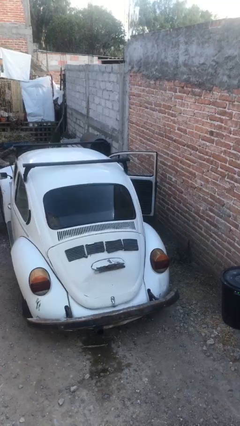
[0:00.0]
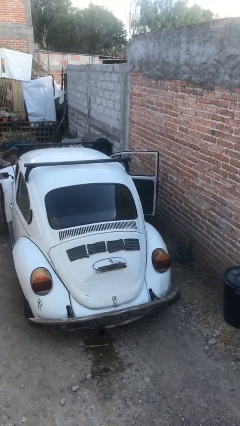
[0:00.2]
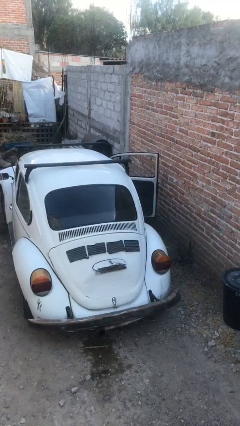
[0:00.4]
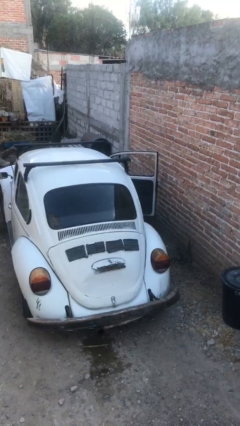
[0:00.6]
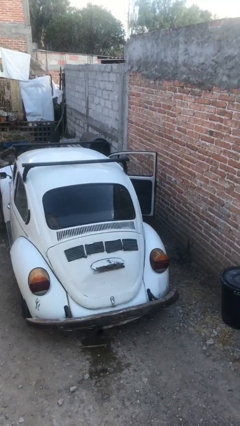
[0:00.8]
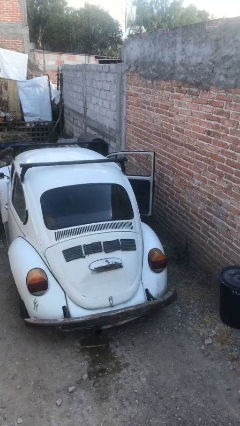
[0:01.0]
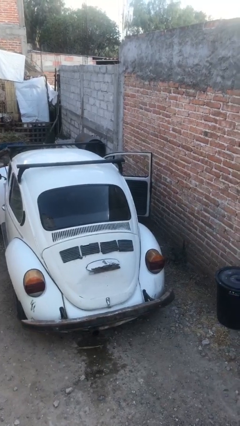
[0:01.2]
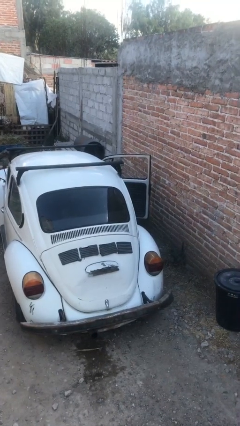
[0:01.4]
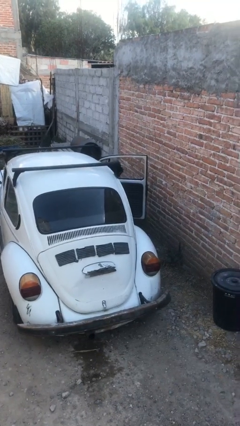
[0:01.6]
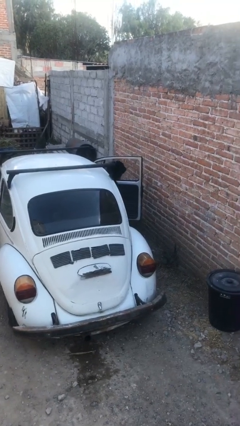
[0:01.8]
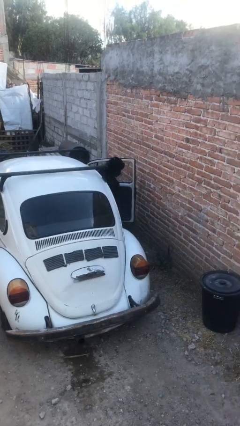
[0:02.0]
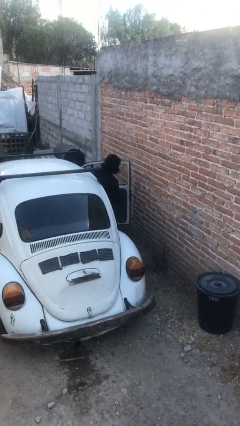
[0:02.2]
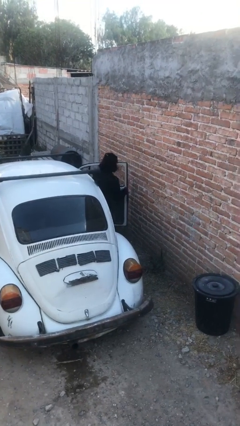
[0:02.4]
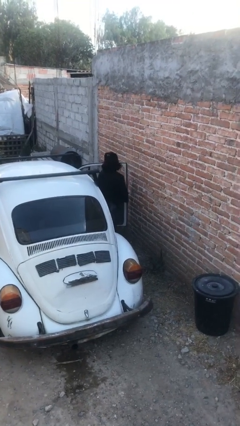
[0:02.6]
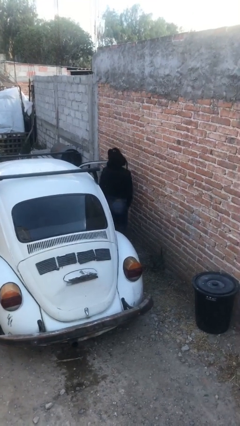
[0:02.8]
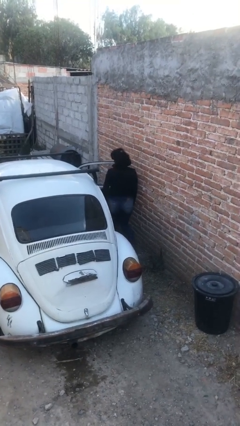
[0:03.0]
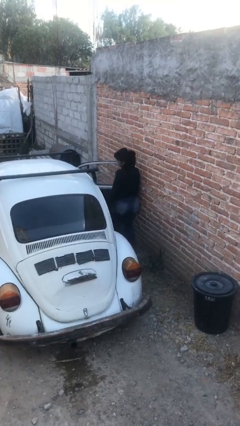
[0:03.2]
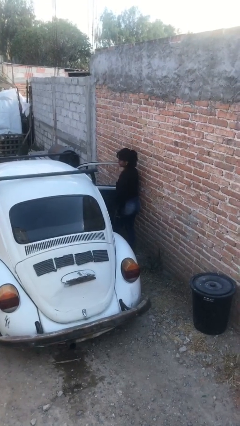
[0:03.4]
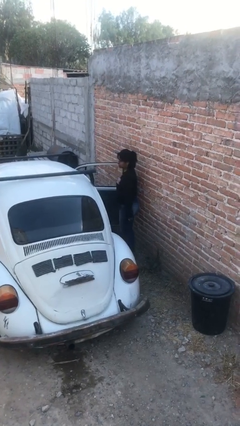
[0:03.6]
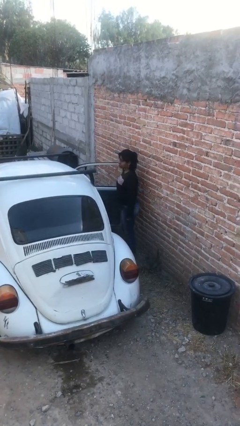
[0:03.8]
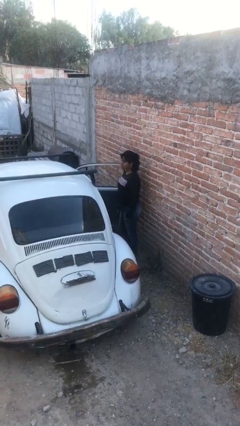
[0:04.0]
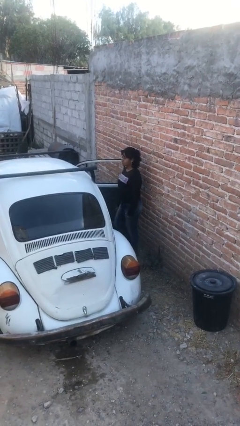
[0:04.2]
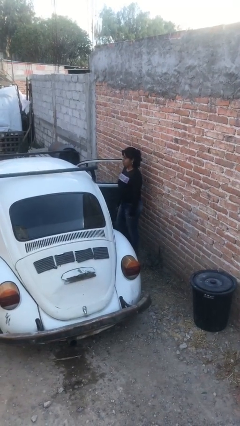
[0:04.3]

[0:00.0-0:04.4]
person exits car

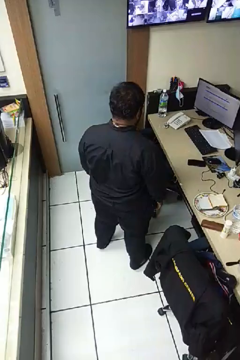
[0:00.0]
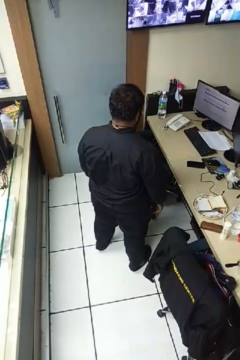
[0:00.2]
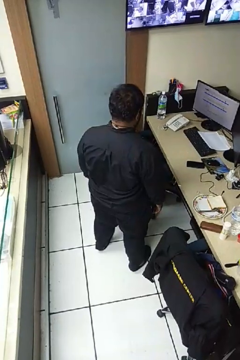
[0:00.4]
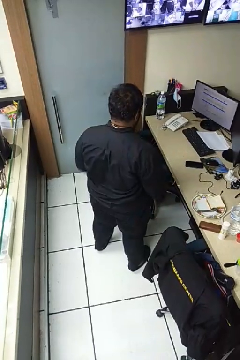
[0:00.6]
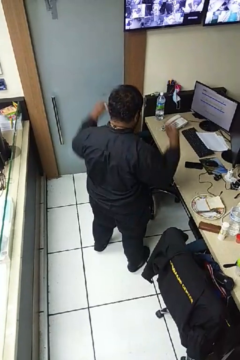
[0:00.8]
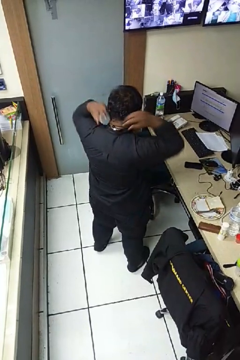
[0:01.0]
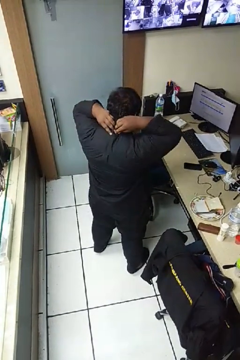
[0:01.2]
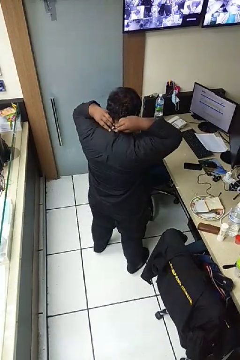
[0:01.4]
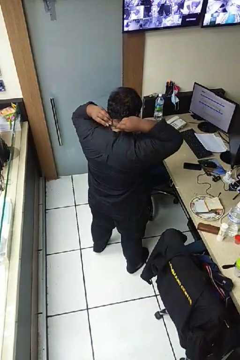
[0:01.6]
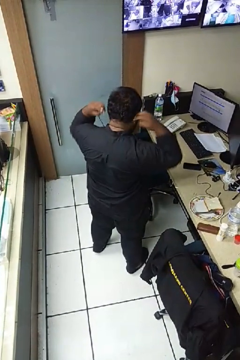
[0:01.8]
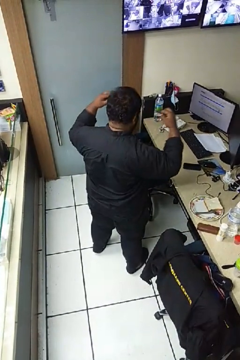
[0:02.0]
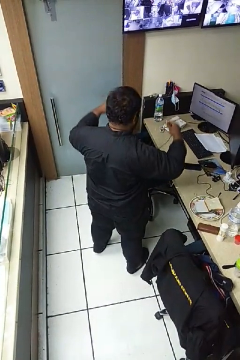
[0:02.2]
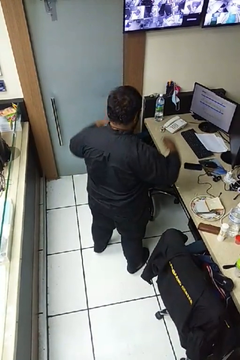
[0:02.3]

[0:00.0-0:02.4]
person takes off necklace

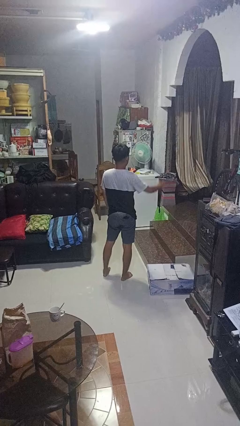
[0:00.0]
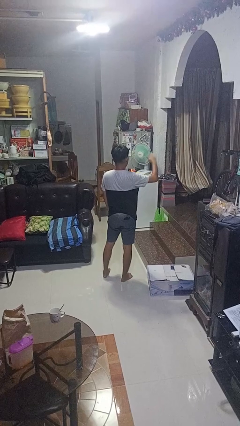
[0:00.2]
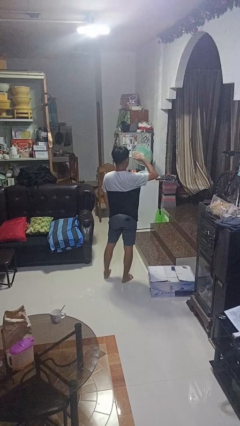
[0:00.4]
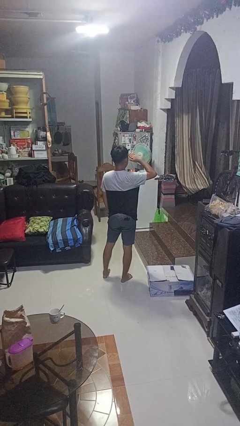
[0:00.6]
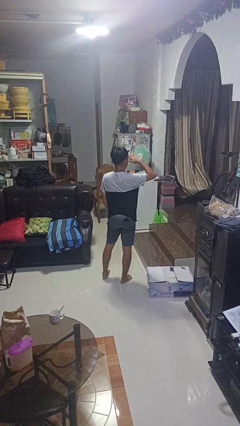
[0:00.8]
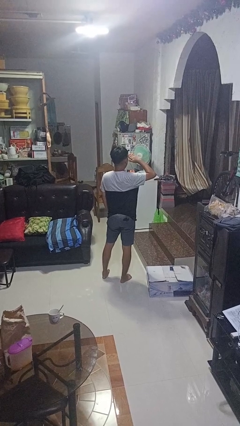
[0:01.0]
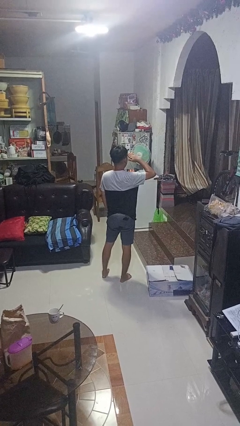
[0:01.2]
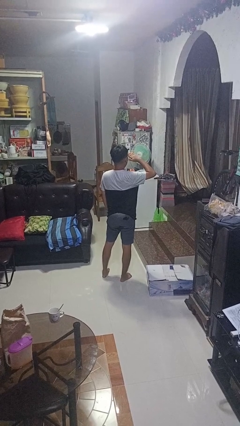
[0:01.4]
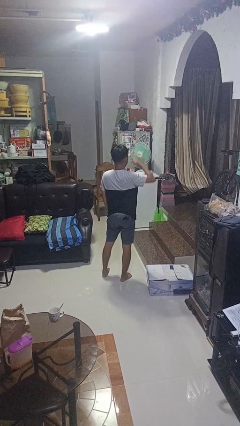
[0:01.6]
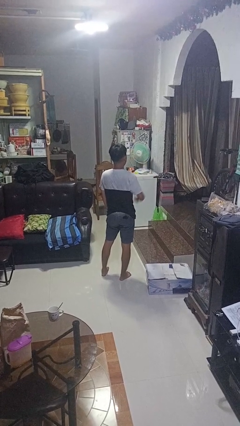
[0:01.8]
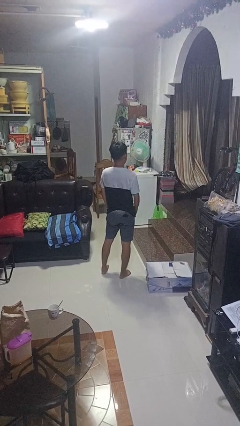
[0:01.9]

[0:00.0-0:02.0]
person salutes

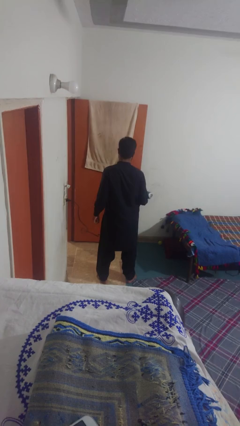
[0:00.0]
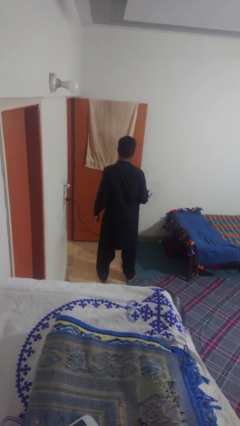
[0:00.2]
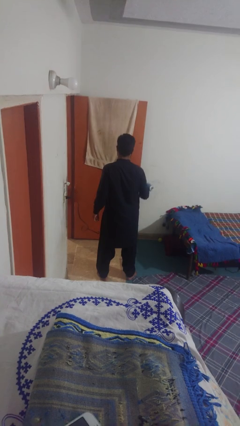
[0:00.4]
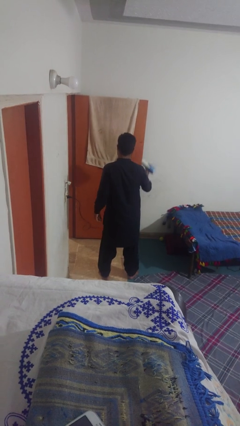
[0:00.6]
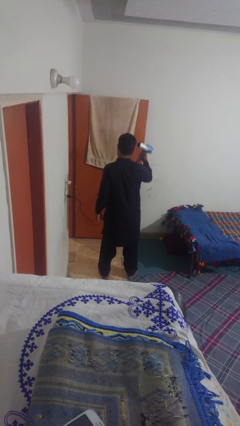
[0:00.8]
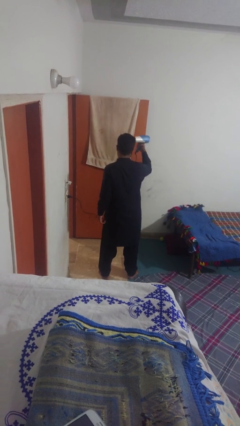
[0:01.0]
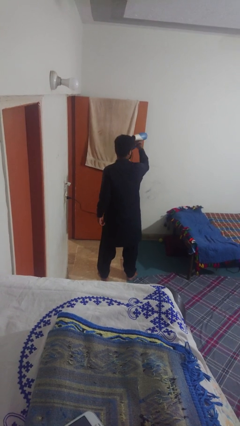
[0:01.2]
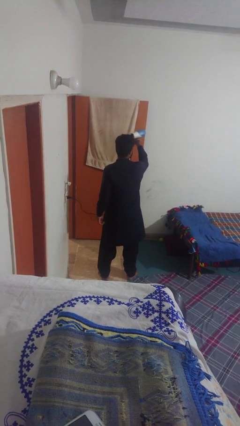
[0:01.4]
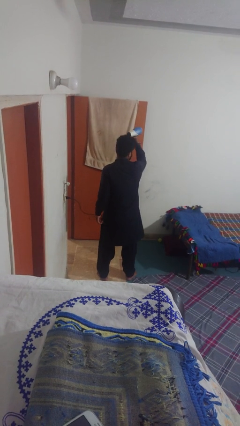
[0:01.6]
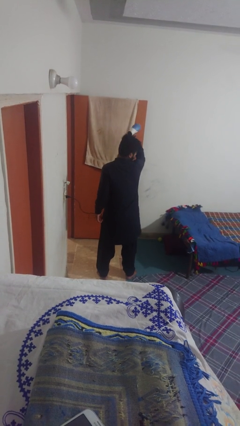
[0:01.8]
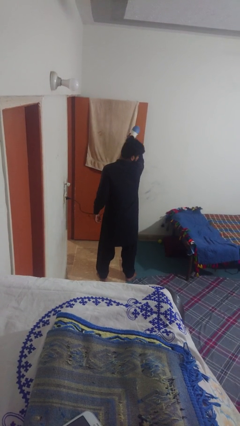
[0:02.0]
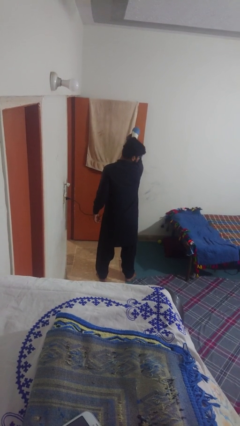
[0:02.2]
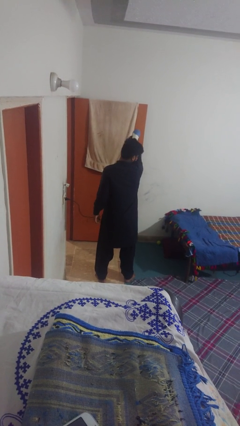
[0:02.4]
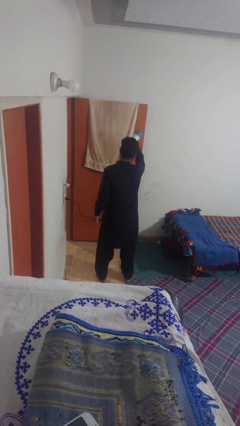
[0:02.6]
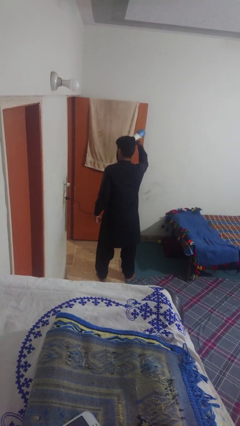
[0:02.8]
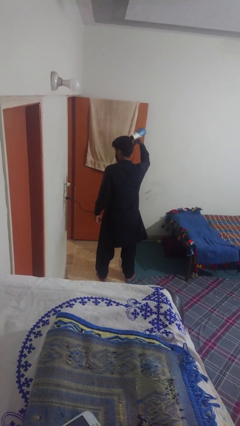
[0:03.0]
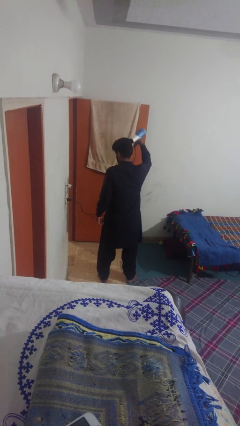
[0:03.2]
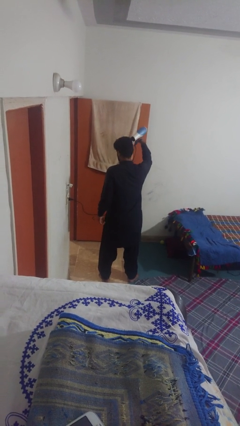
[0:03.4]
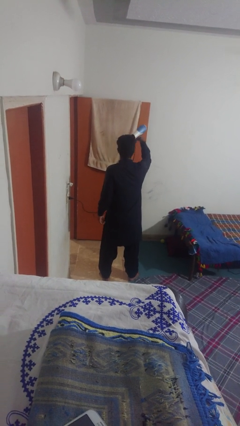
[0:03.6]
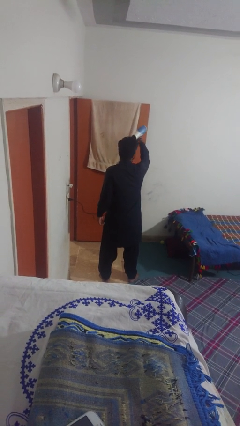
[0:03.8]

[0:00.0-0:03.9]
person dries hair with hairdryer

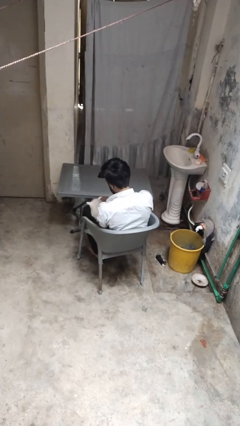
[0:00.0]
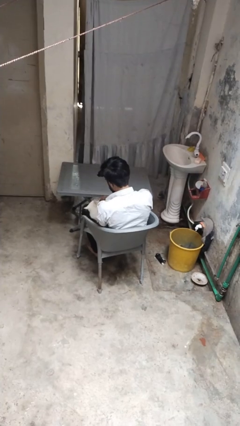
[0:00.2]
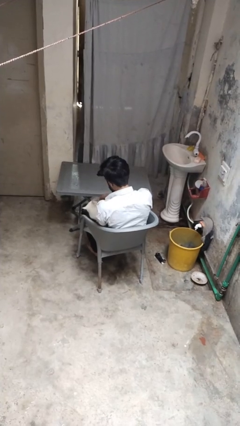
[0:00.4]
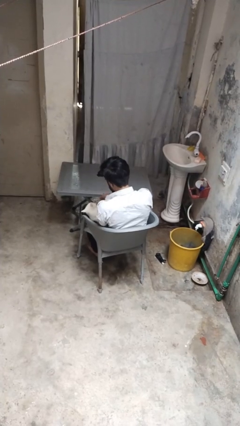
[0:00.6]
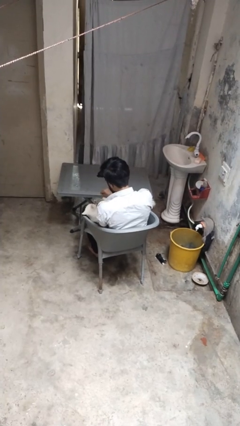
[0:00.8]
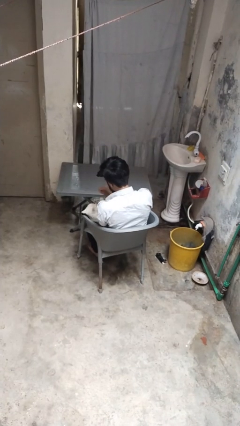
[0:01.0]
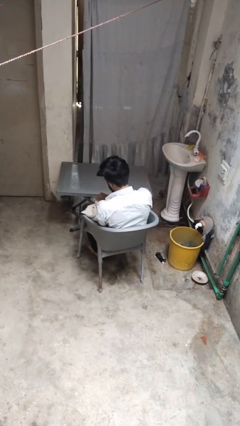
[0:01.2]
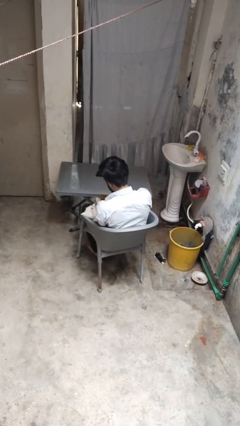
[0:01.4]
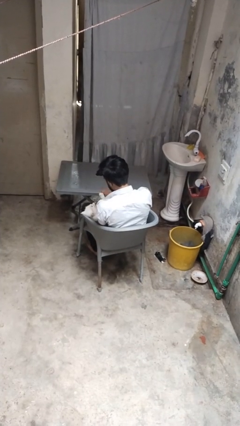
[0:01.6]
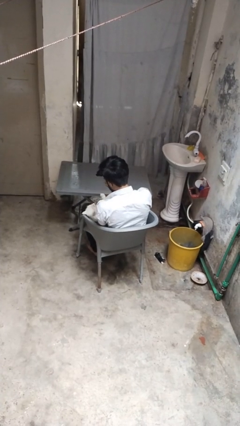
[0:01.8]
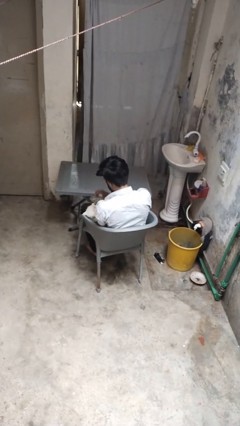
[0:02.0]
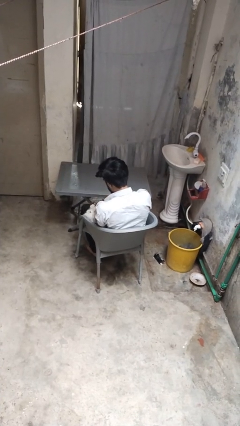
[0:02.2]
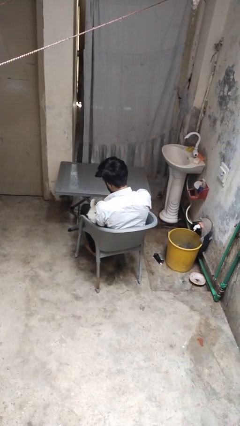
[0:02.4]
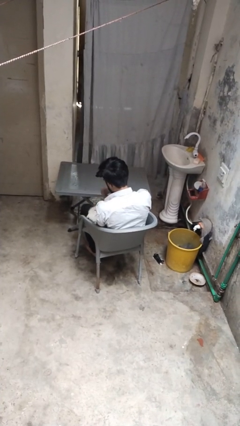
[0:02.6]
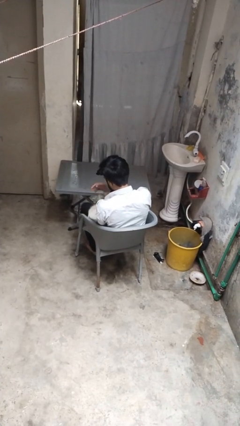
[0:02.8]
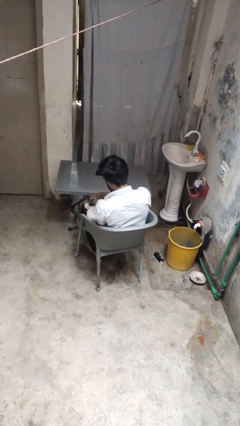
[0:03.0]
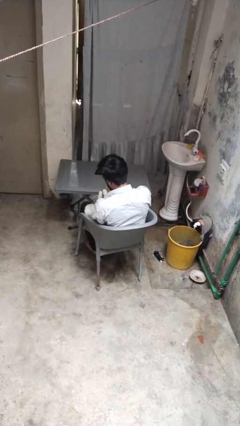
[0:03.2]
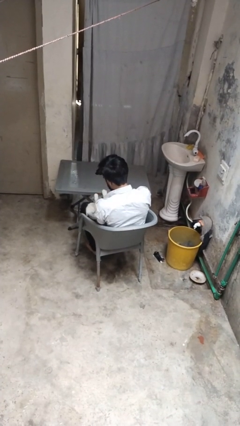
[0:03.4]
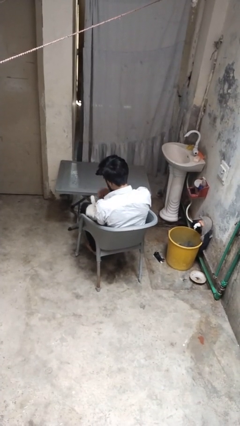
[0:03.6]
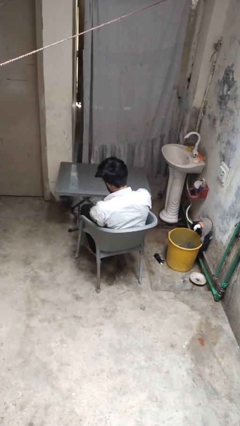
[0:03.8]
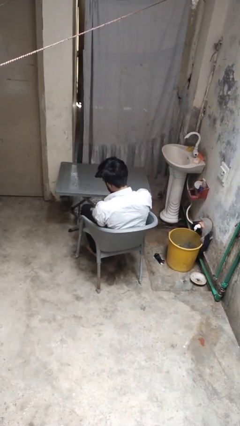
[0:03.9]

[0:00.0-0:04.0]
person pets cat

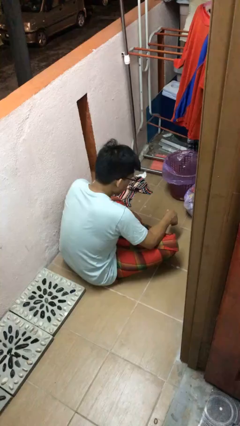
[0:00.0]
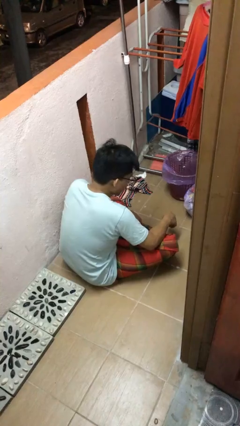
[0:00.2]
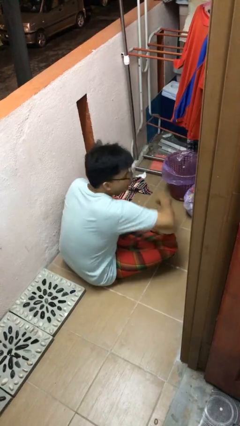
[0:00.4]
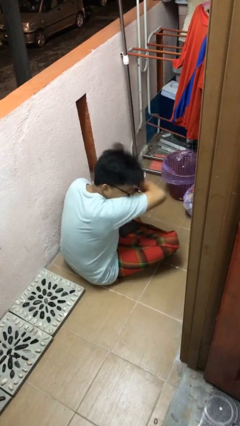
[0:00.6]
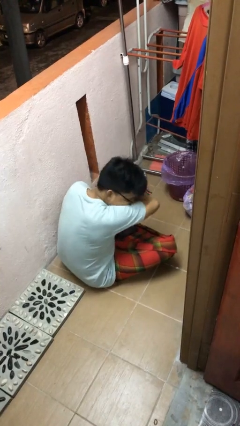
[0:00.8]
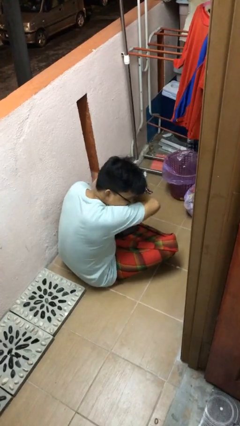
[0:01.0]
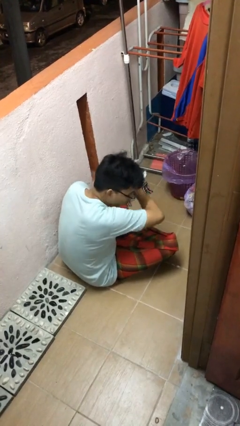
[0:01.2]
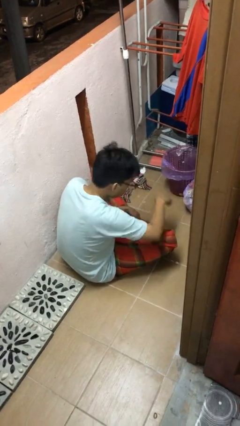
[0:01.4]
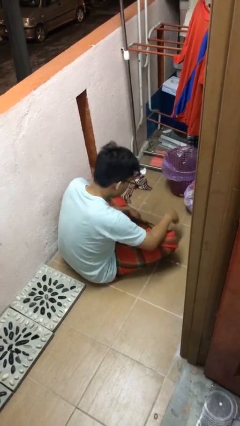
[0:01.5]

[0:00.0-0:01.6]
person sneezes into arm
